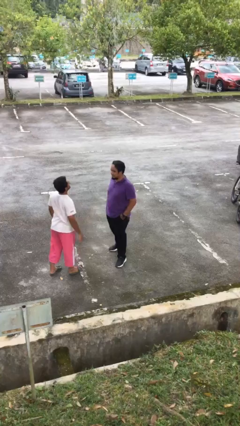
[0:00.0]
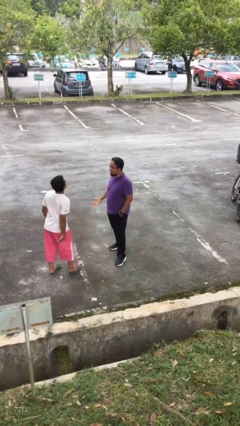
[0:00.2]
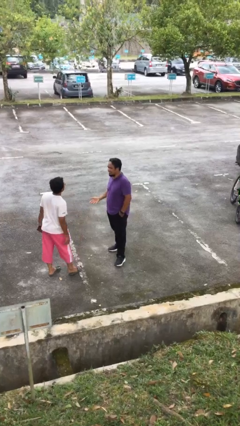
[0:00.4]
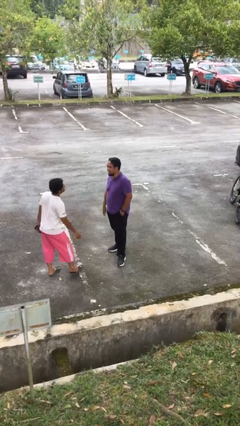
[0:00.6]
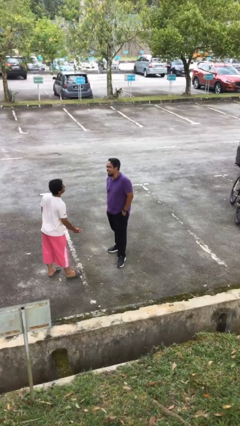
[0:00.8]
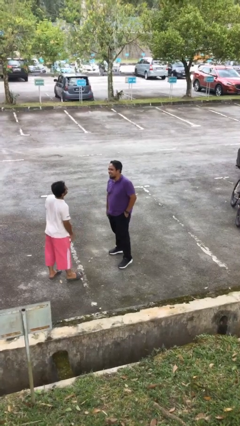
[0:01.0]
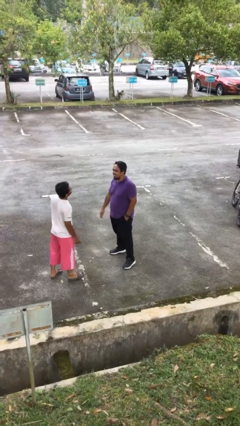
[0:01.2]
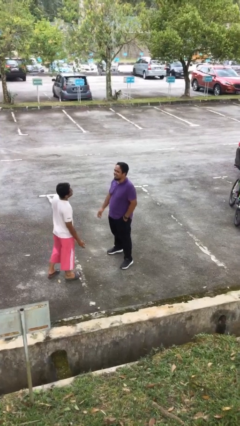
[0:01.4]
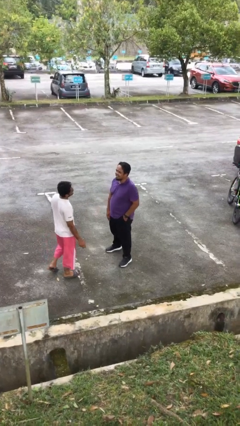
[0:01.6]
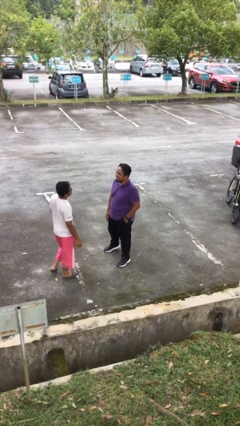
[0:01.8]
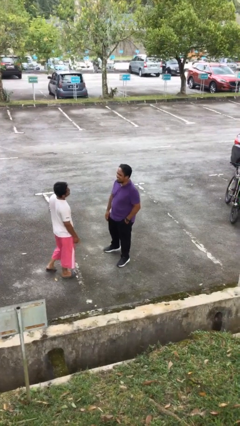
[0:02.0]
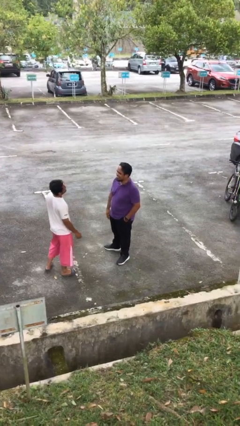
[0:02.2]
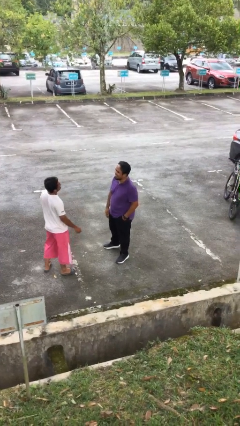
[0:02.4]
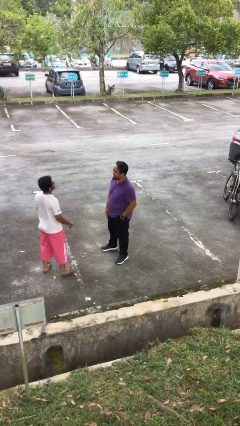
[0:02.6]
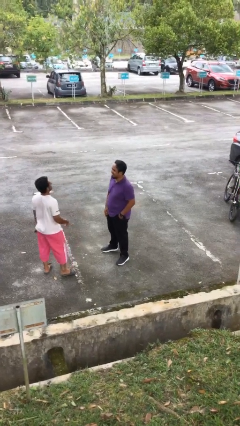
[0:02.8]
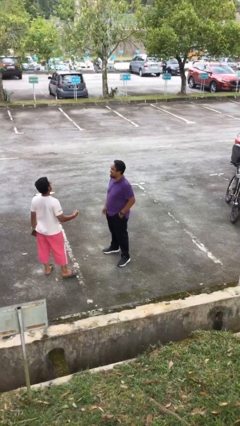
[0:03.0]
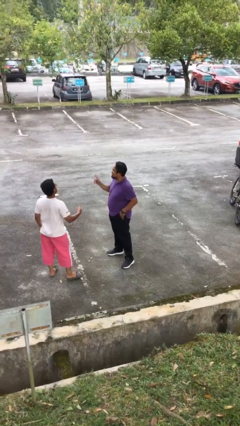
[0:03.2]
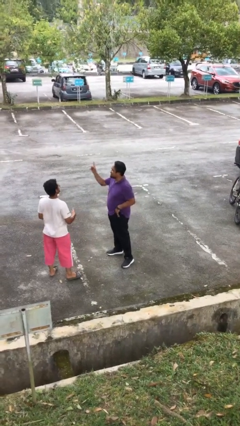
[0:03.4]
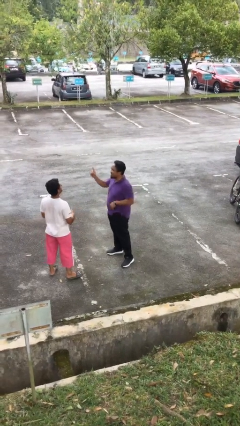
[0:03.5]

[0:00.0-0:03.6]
person talks to person

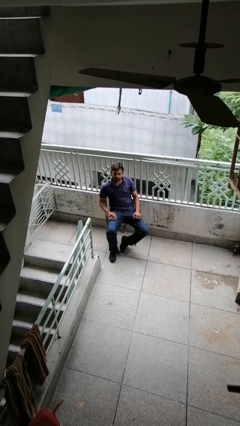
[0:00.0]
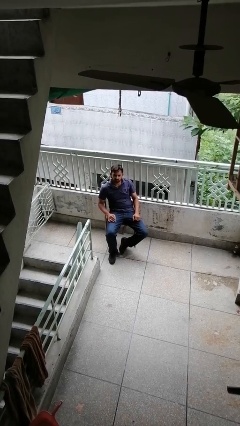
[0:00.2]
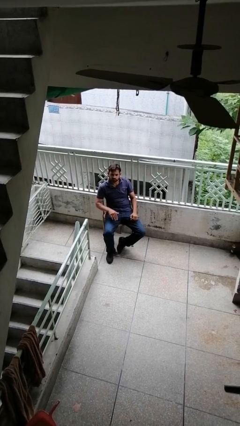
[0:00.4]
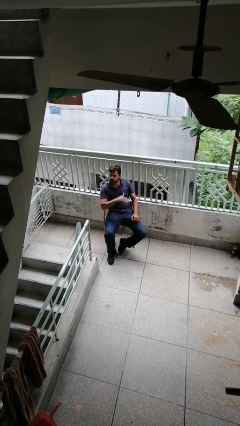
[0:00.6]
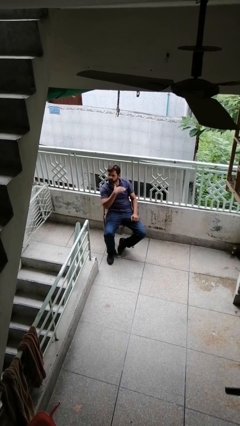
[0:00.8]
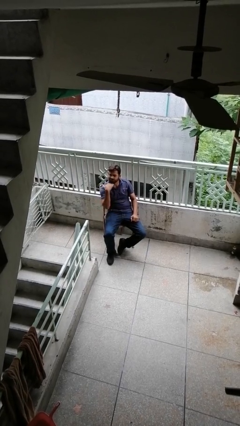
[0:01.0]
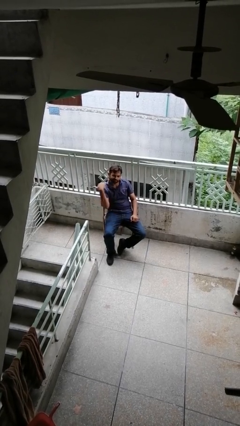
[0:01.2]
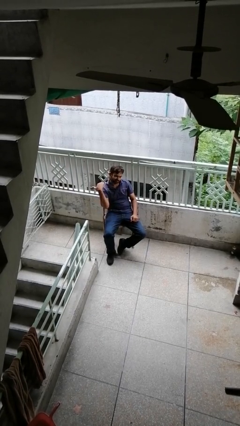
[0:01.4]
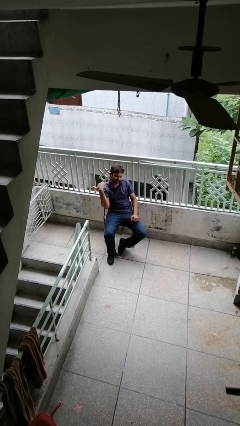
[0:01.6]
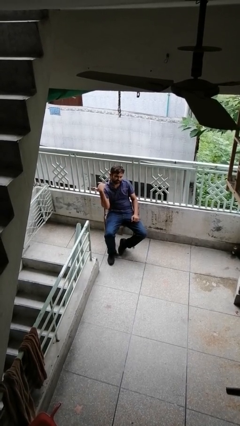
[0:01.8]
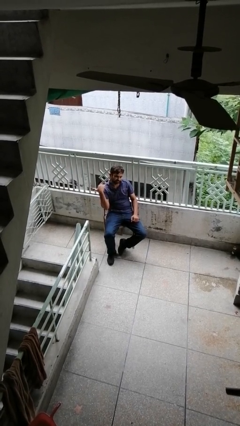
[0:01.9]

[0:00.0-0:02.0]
person gestures cut

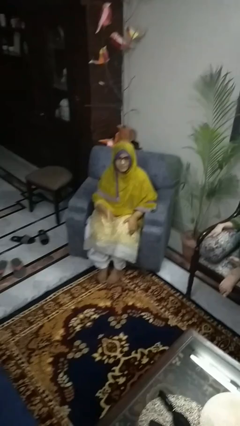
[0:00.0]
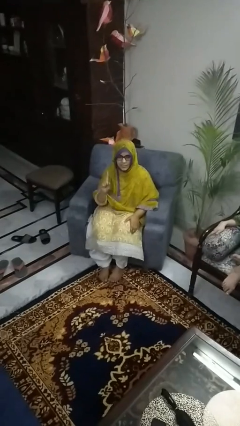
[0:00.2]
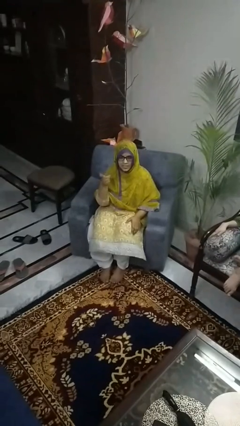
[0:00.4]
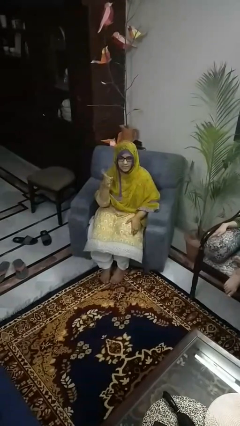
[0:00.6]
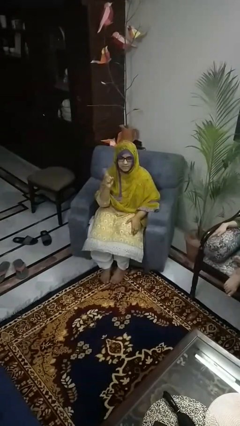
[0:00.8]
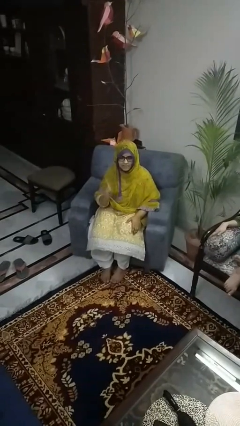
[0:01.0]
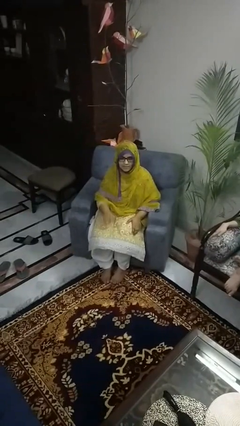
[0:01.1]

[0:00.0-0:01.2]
person gestures number one

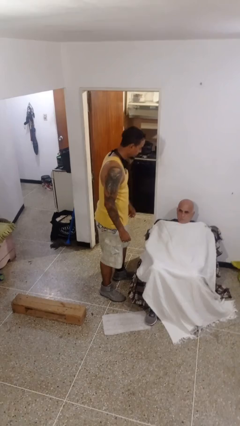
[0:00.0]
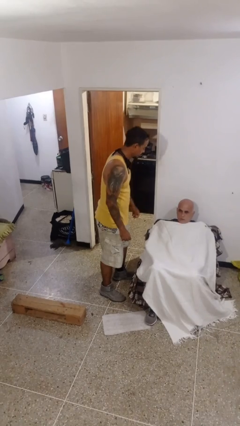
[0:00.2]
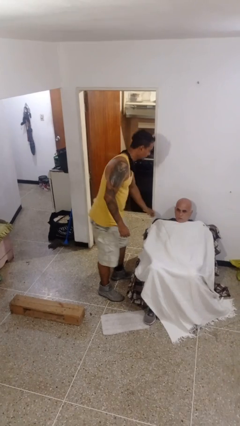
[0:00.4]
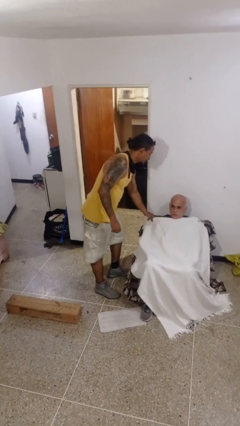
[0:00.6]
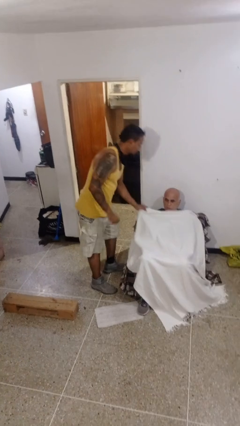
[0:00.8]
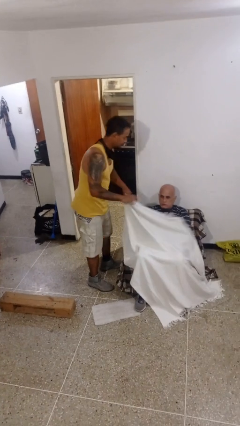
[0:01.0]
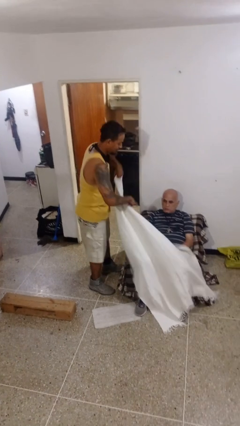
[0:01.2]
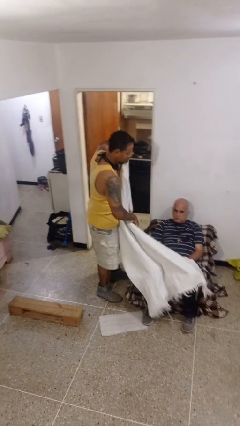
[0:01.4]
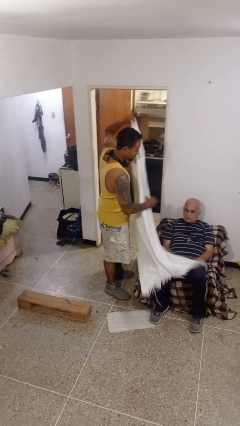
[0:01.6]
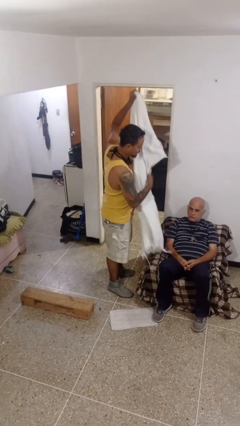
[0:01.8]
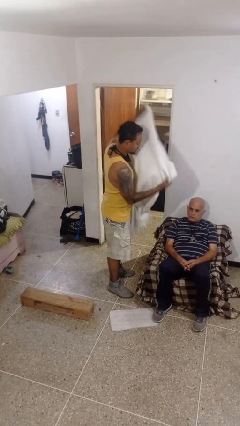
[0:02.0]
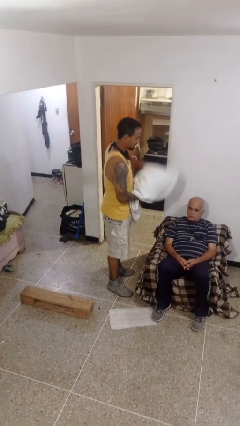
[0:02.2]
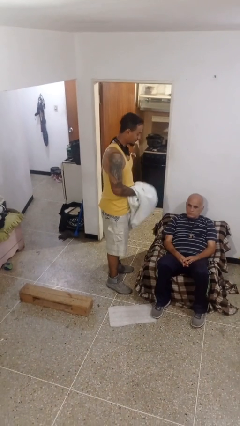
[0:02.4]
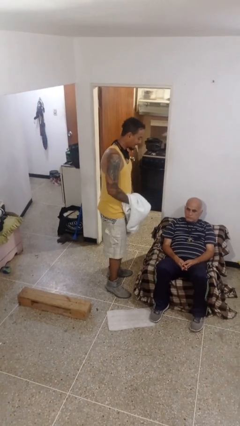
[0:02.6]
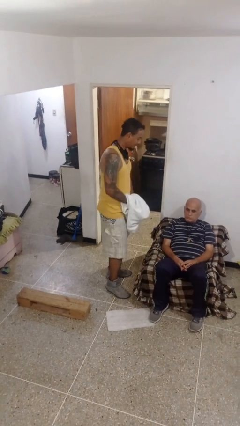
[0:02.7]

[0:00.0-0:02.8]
person uncovers friend with blanket

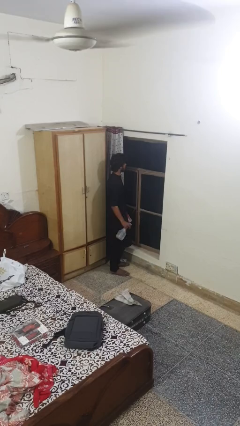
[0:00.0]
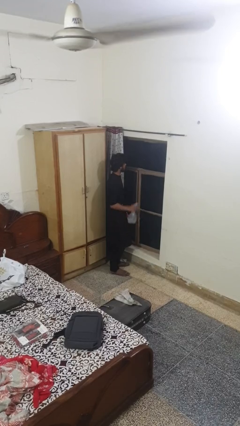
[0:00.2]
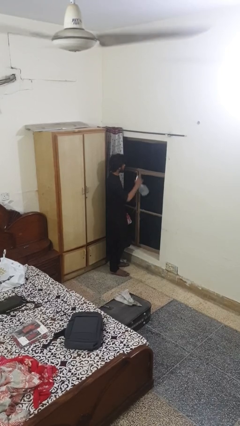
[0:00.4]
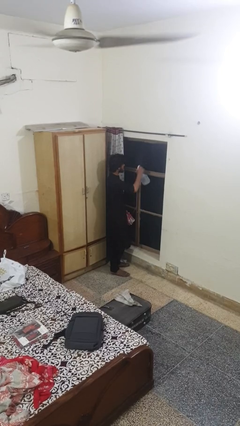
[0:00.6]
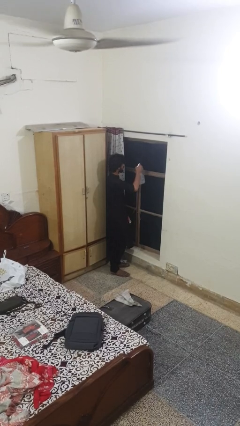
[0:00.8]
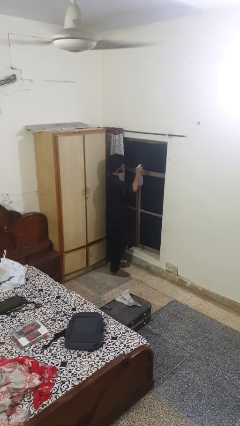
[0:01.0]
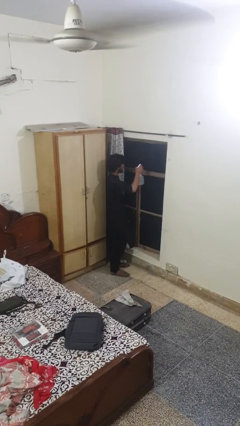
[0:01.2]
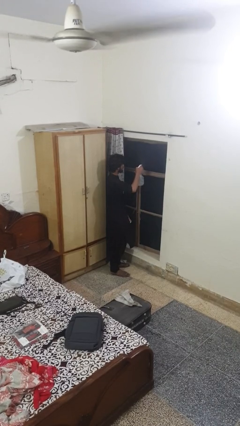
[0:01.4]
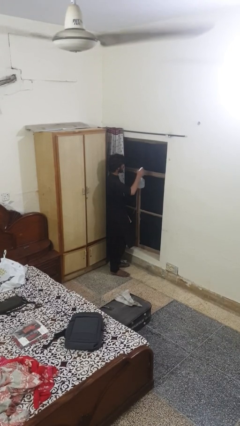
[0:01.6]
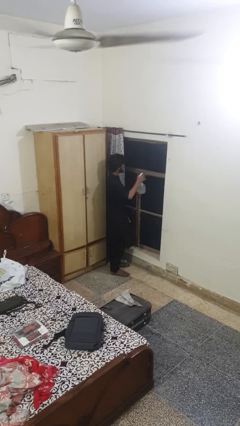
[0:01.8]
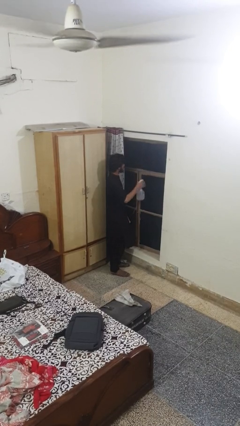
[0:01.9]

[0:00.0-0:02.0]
person sprays from bottle

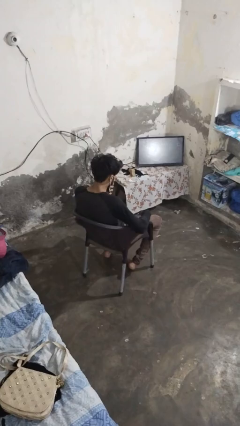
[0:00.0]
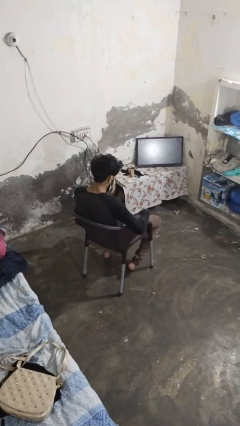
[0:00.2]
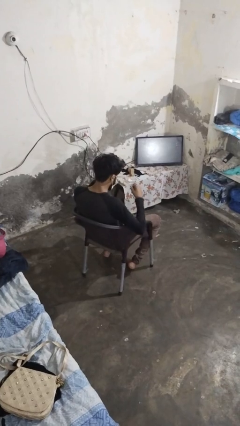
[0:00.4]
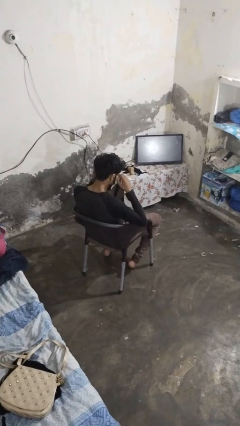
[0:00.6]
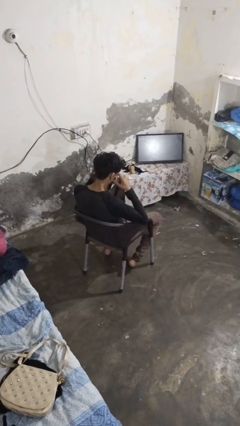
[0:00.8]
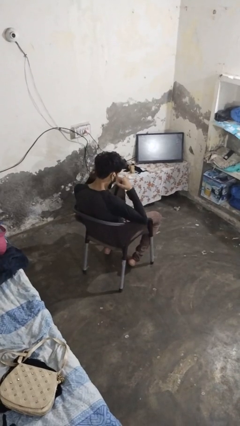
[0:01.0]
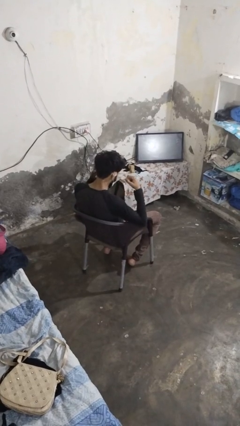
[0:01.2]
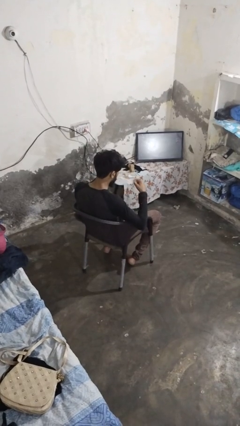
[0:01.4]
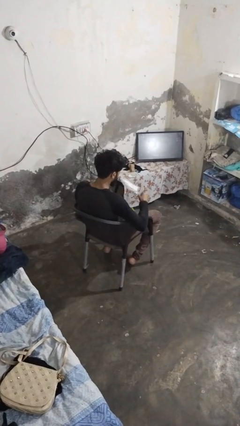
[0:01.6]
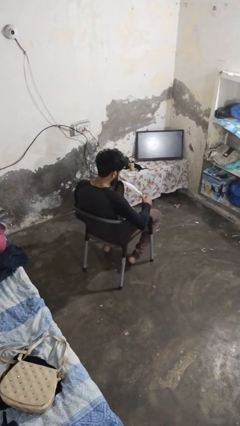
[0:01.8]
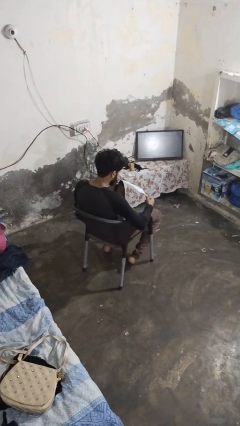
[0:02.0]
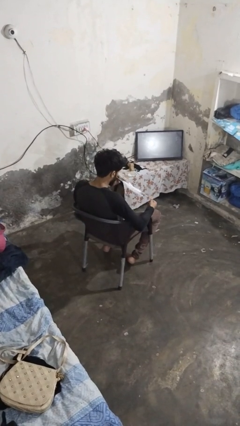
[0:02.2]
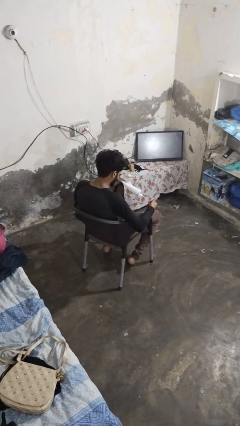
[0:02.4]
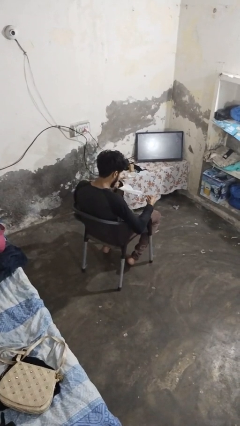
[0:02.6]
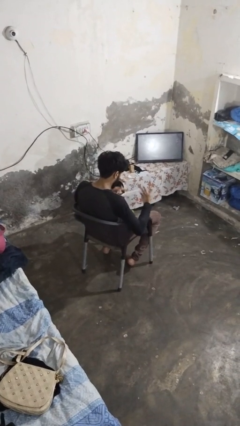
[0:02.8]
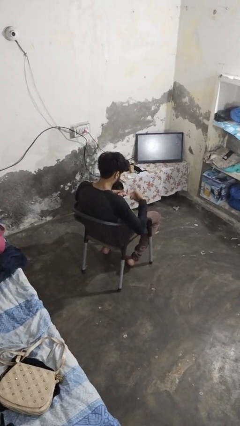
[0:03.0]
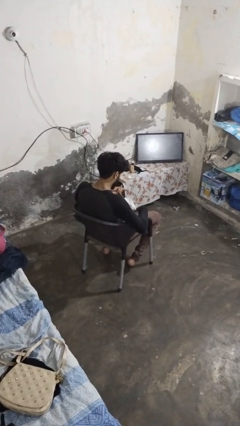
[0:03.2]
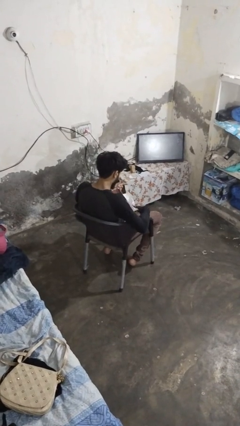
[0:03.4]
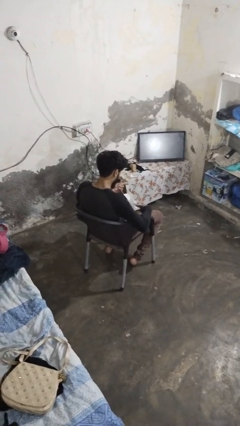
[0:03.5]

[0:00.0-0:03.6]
person takes off facemask

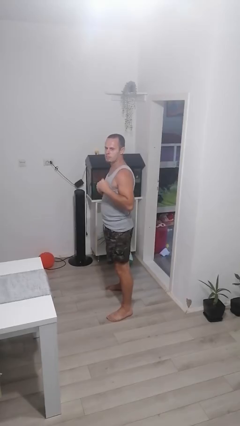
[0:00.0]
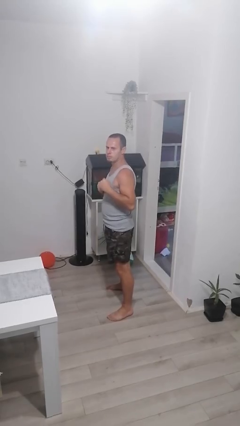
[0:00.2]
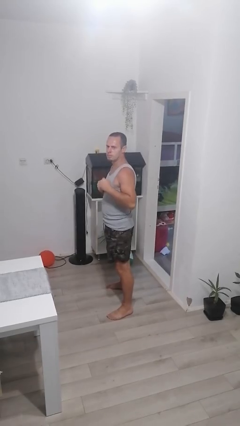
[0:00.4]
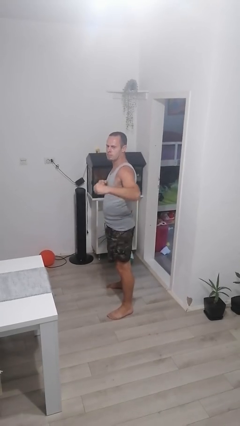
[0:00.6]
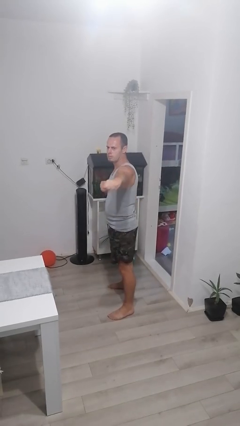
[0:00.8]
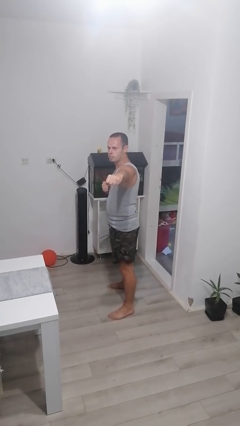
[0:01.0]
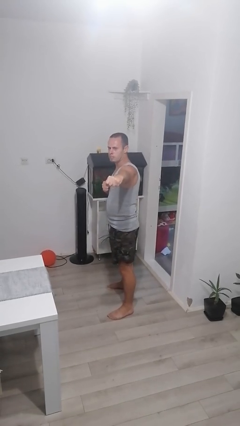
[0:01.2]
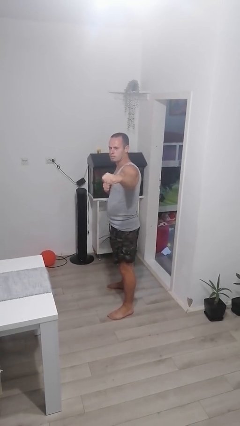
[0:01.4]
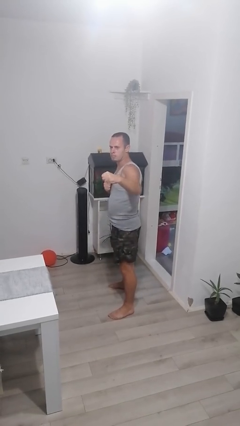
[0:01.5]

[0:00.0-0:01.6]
person karate chop

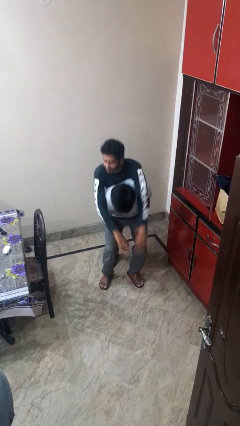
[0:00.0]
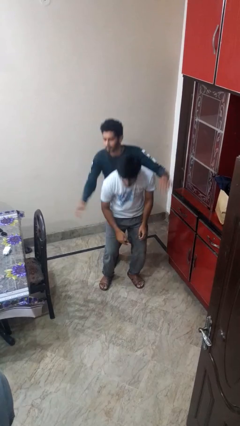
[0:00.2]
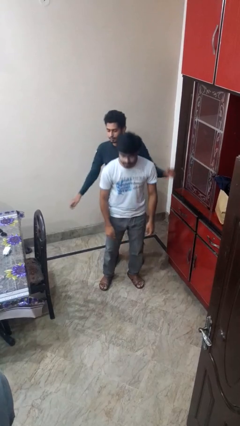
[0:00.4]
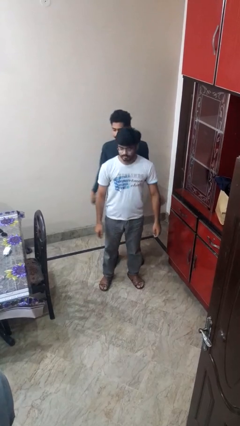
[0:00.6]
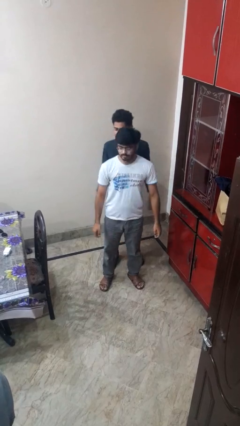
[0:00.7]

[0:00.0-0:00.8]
person puts down person
